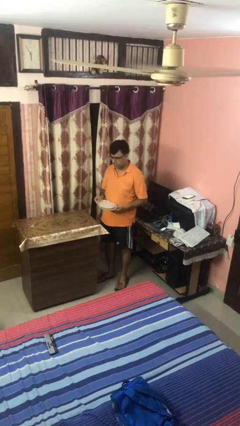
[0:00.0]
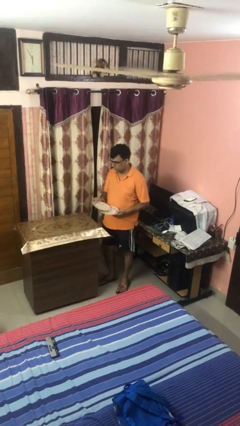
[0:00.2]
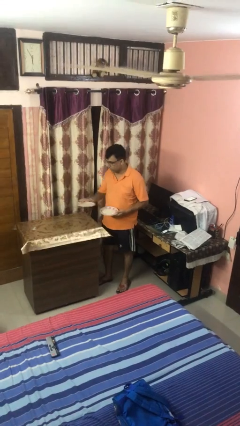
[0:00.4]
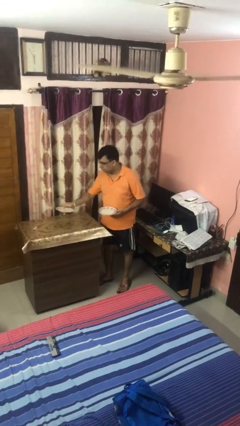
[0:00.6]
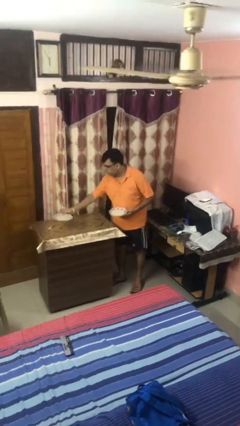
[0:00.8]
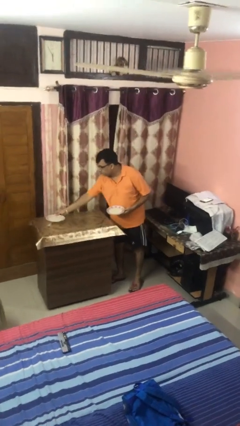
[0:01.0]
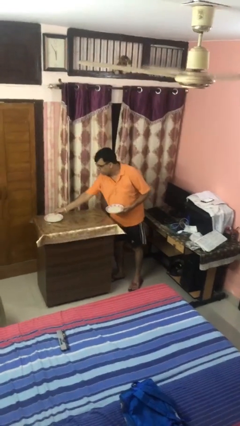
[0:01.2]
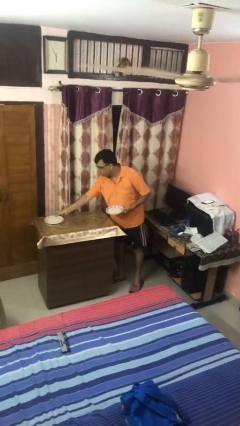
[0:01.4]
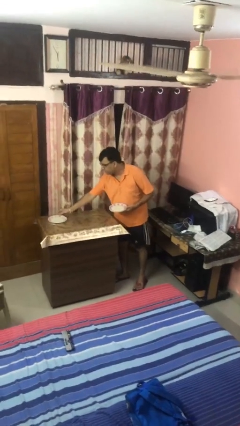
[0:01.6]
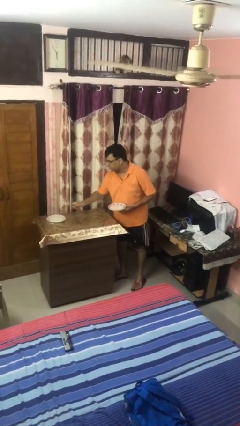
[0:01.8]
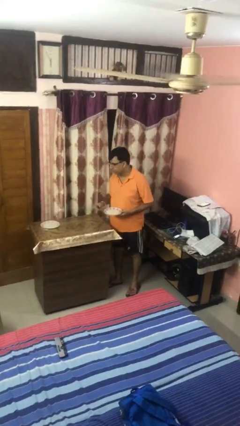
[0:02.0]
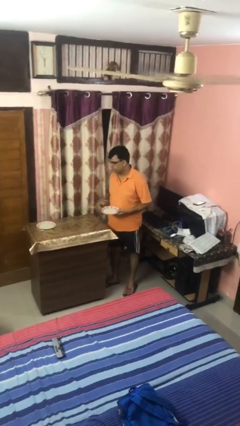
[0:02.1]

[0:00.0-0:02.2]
person sets table

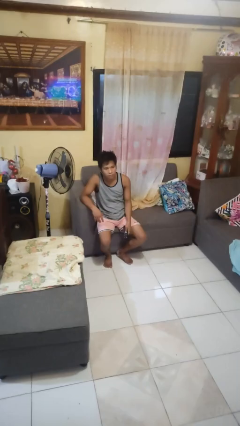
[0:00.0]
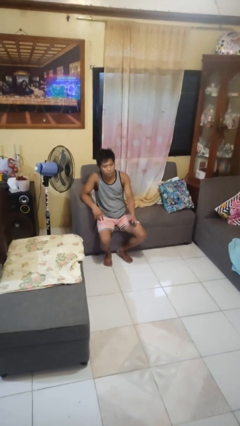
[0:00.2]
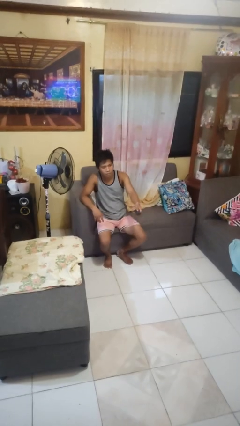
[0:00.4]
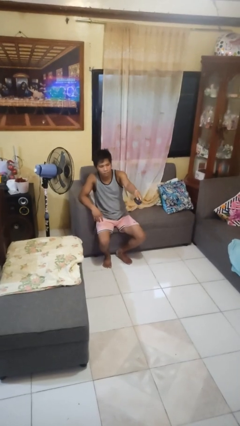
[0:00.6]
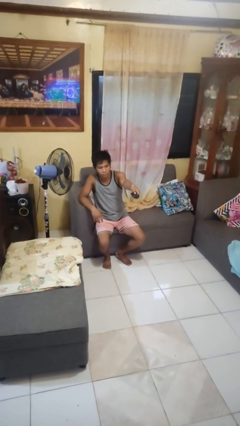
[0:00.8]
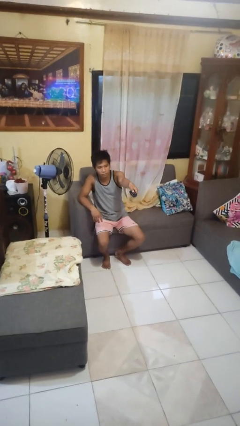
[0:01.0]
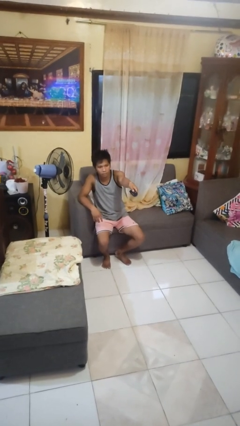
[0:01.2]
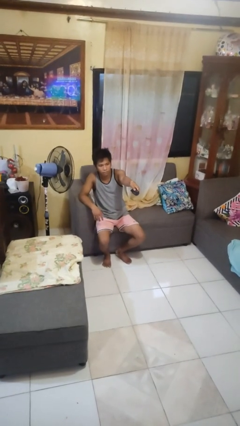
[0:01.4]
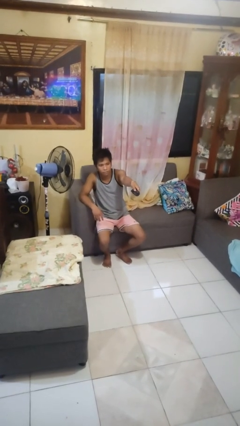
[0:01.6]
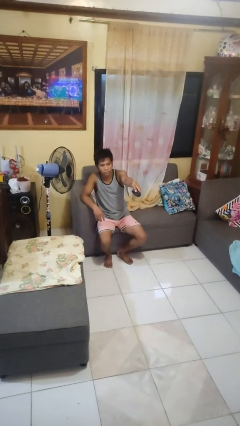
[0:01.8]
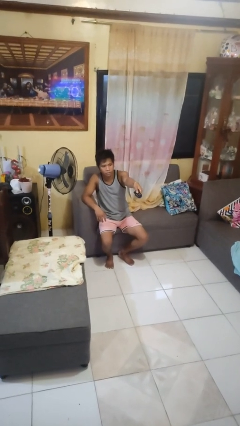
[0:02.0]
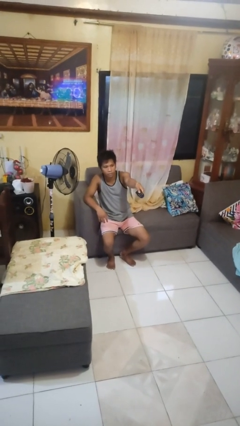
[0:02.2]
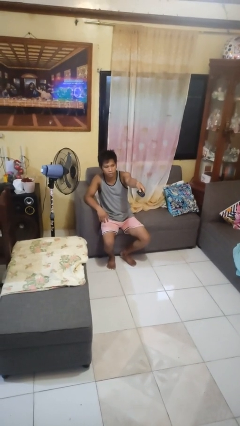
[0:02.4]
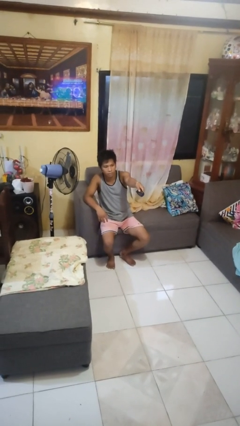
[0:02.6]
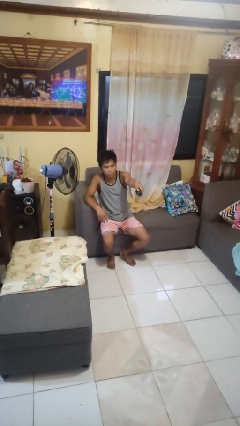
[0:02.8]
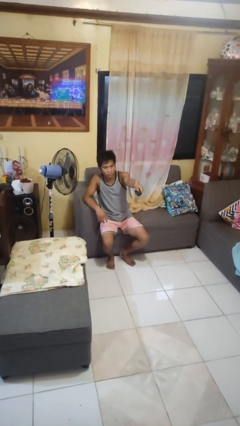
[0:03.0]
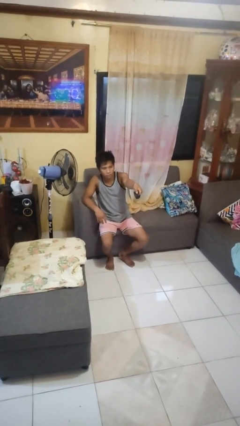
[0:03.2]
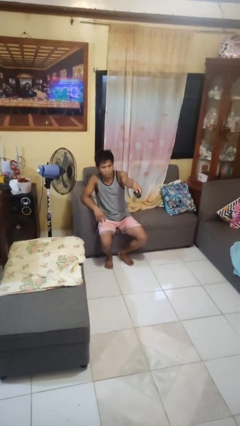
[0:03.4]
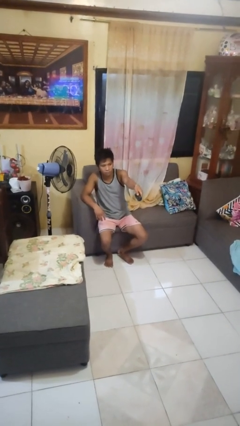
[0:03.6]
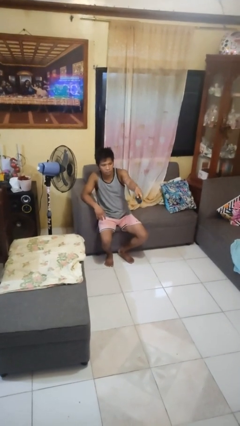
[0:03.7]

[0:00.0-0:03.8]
person uses television remote

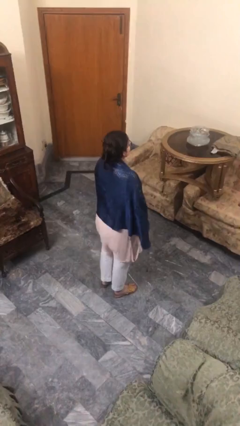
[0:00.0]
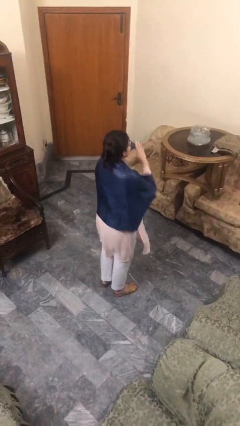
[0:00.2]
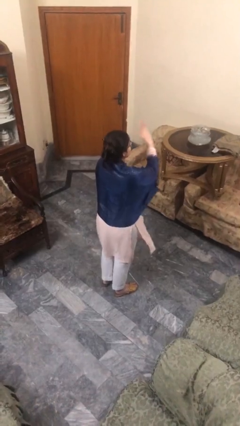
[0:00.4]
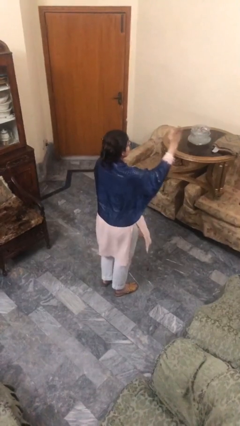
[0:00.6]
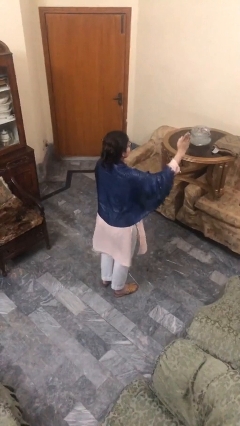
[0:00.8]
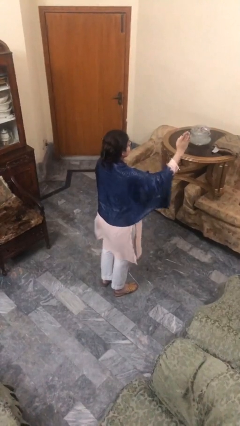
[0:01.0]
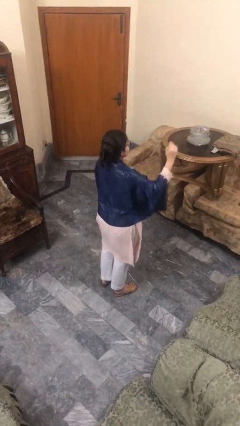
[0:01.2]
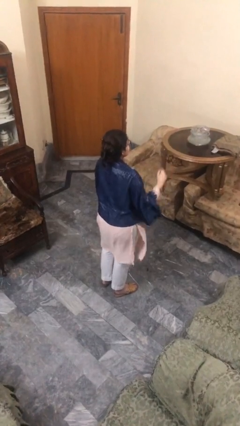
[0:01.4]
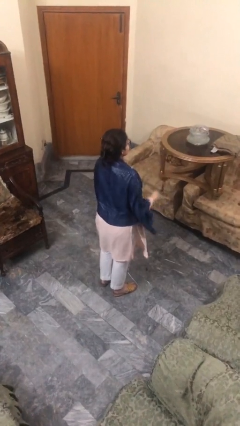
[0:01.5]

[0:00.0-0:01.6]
person gestures swipe right

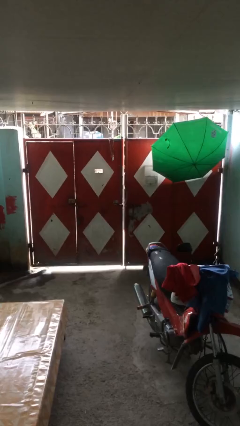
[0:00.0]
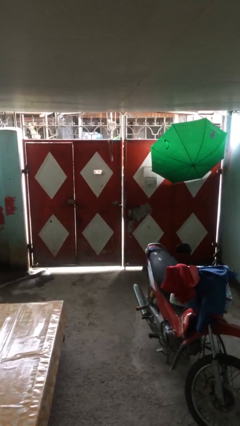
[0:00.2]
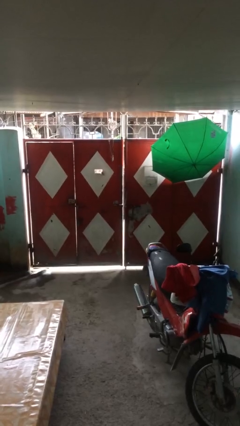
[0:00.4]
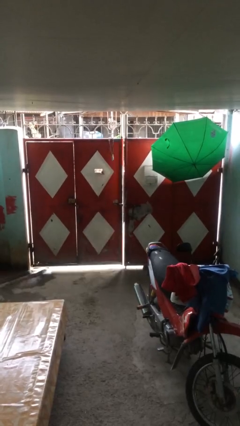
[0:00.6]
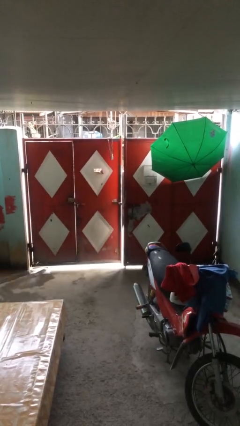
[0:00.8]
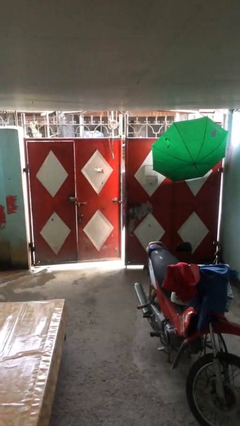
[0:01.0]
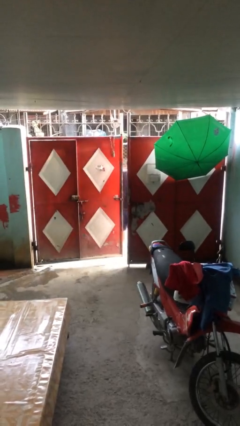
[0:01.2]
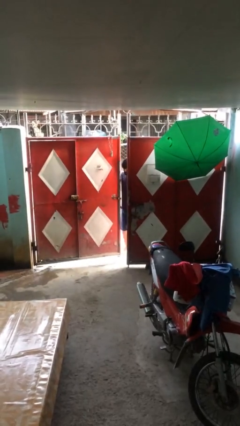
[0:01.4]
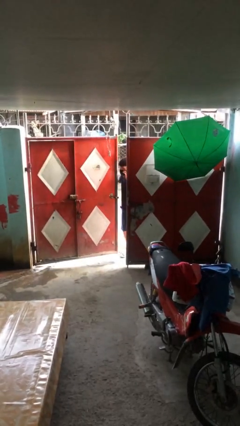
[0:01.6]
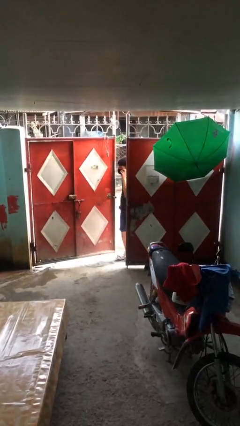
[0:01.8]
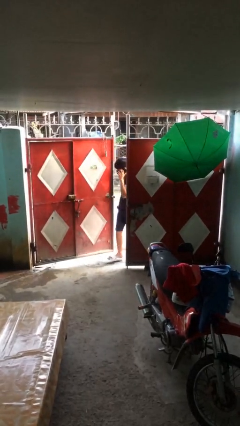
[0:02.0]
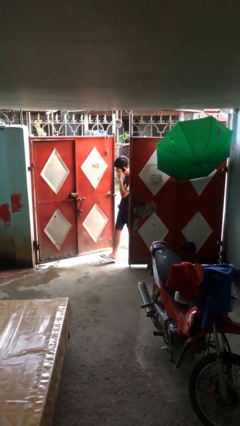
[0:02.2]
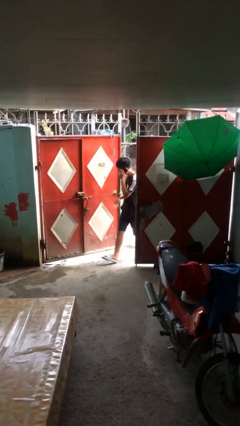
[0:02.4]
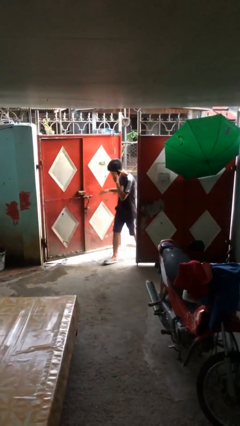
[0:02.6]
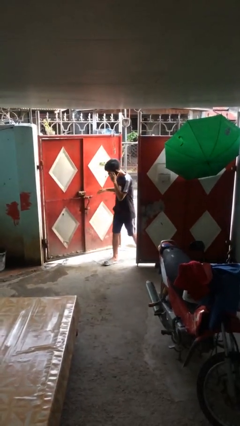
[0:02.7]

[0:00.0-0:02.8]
person opens facility door

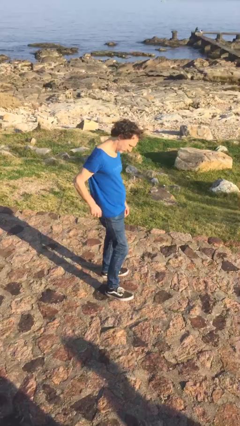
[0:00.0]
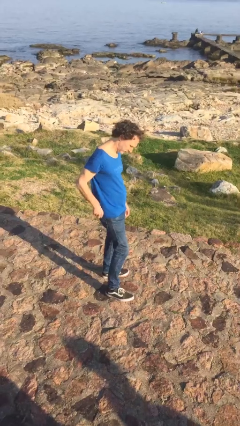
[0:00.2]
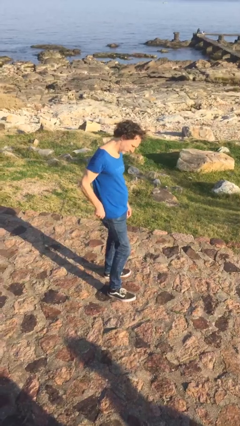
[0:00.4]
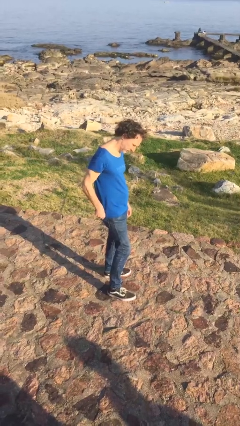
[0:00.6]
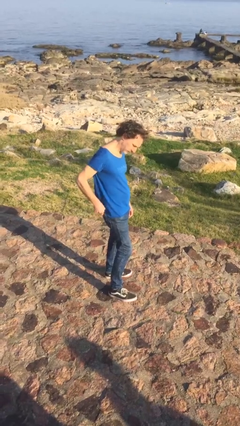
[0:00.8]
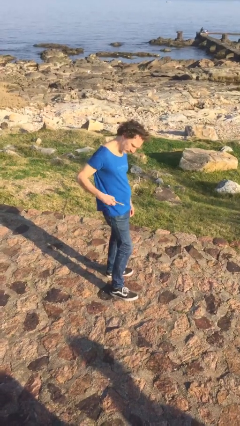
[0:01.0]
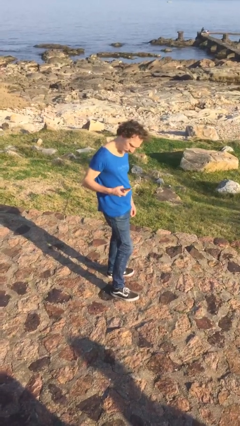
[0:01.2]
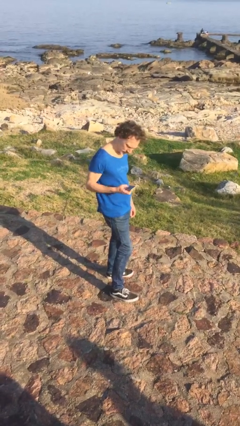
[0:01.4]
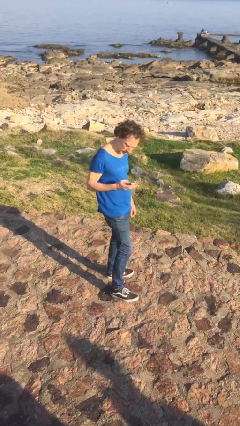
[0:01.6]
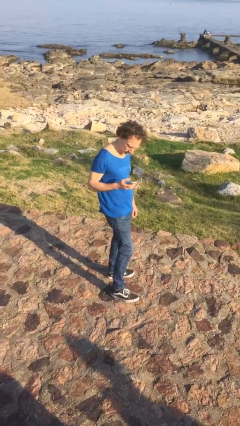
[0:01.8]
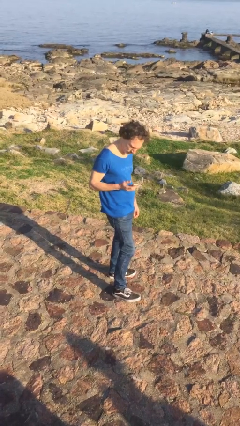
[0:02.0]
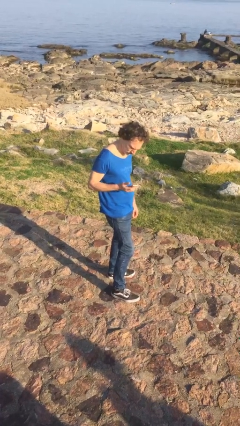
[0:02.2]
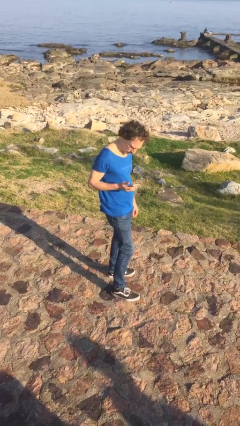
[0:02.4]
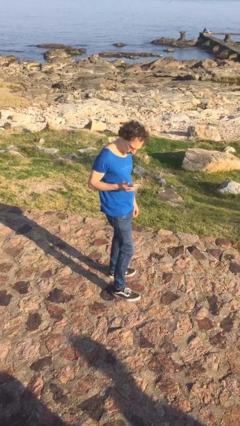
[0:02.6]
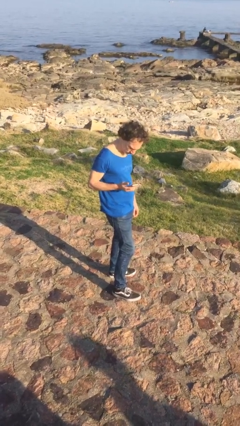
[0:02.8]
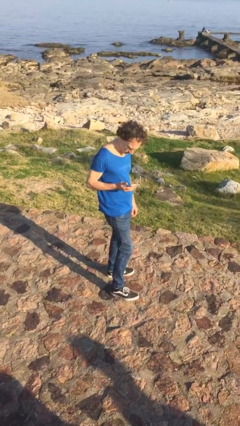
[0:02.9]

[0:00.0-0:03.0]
person takes phone from pocket

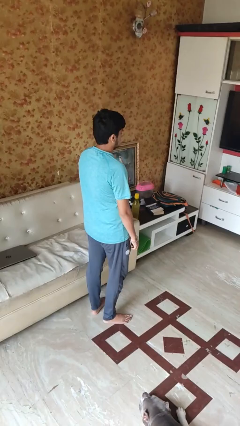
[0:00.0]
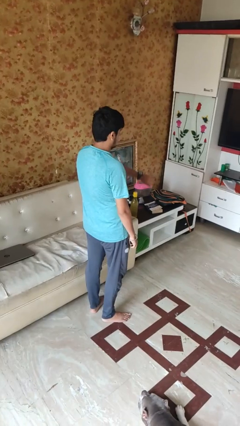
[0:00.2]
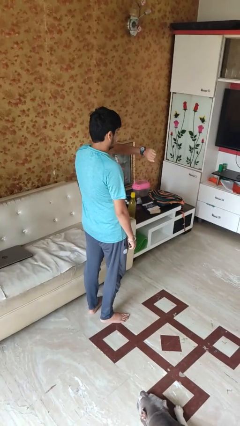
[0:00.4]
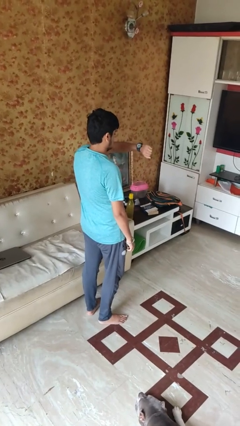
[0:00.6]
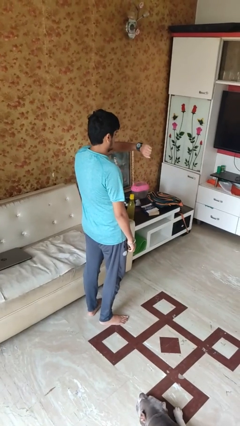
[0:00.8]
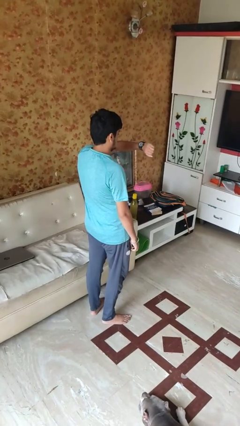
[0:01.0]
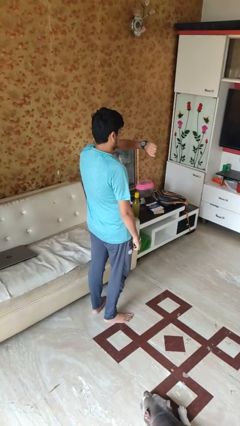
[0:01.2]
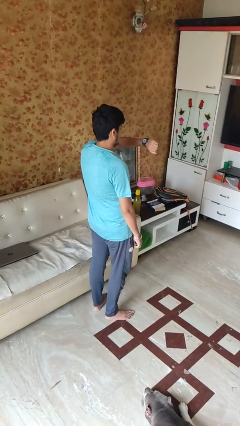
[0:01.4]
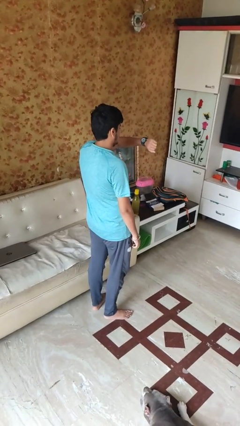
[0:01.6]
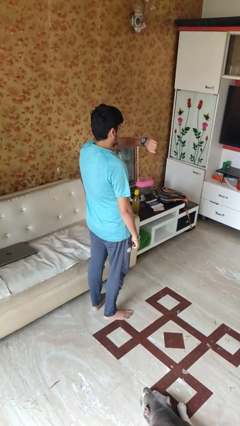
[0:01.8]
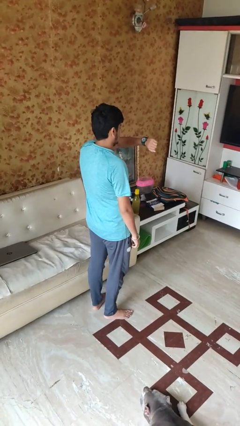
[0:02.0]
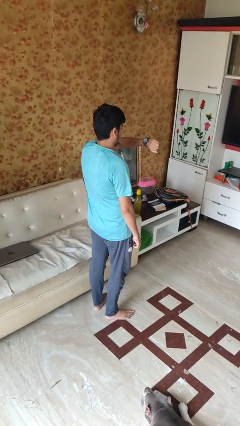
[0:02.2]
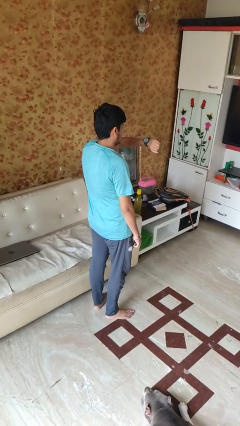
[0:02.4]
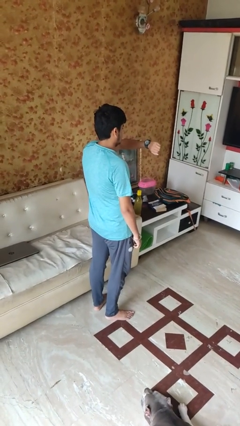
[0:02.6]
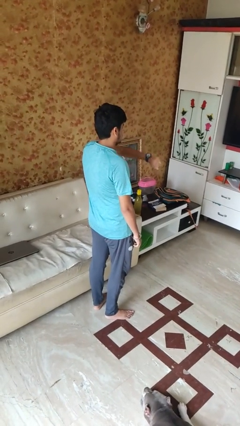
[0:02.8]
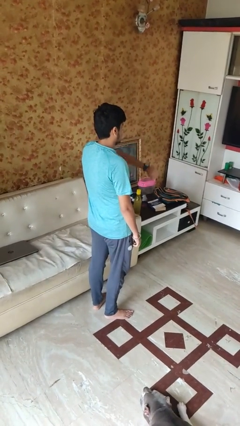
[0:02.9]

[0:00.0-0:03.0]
person looks at wristwatch

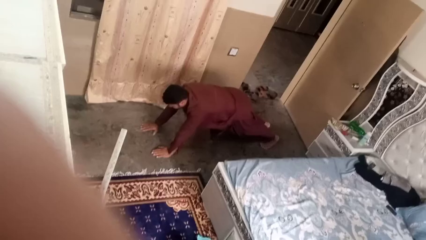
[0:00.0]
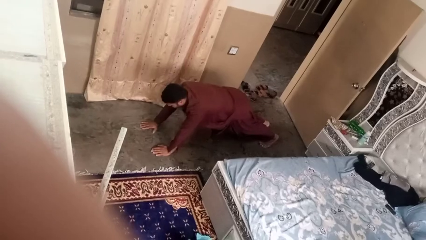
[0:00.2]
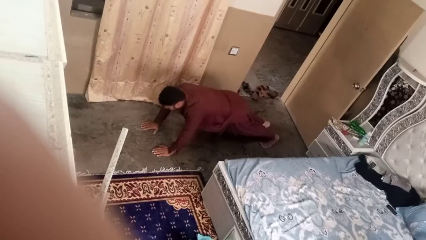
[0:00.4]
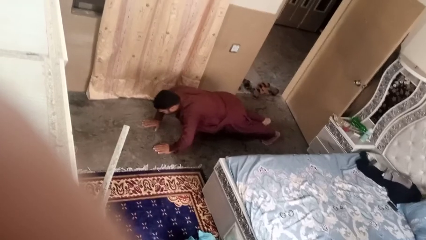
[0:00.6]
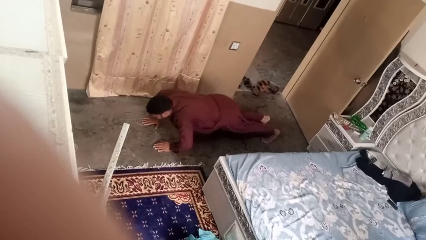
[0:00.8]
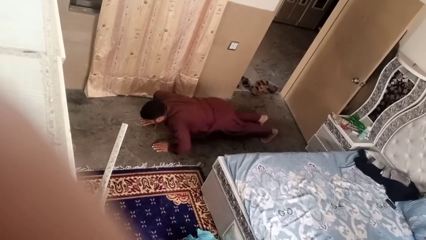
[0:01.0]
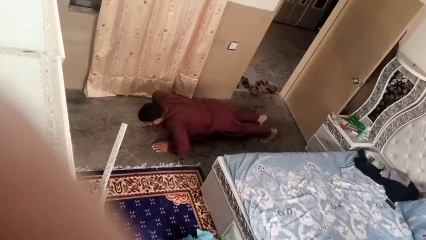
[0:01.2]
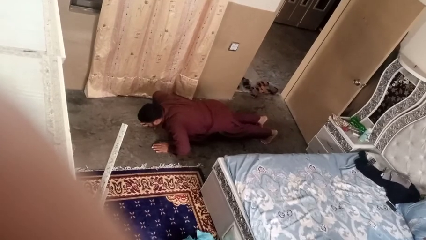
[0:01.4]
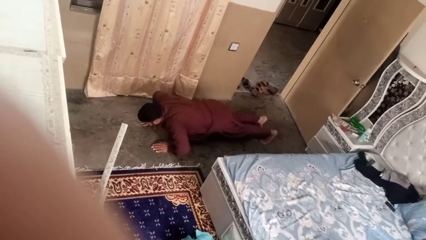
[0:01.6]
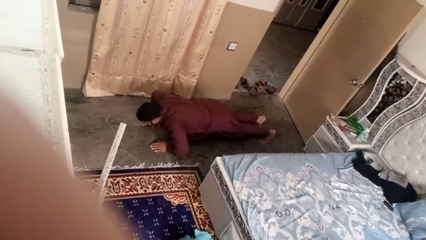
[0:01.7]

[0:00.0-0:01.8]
person exercises with pushup
